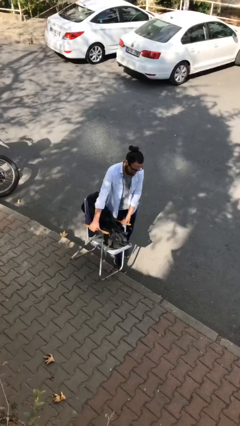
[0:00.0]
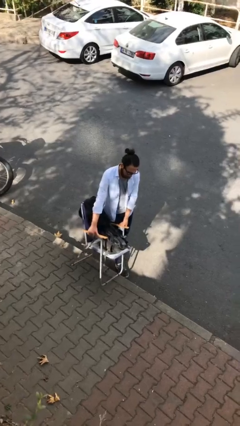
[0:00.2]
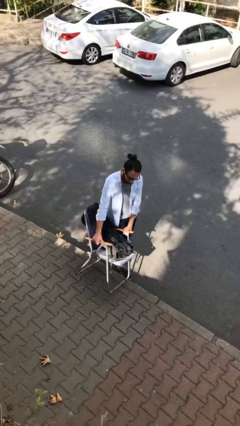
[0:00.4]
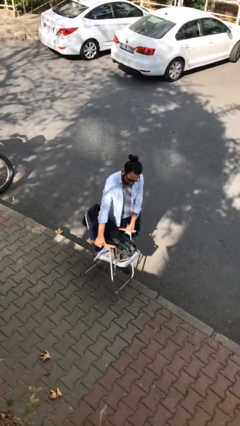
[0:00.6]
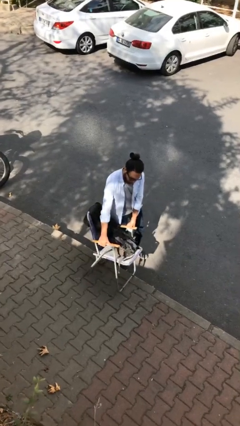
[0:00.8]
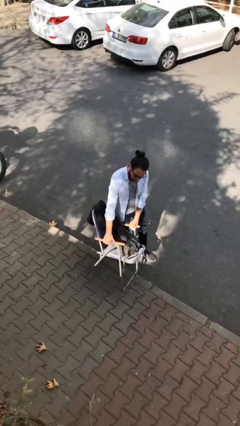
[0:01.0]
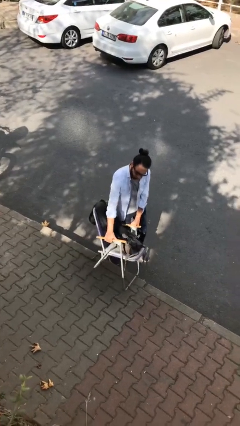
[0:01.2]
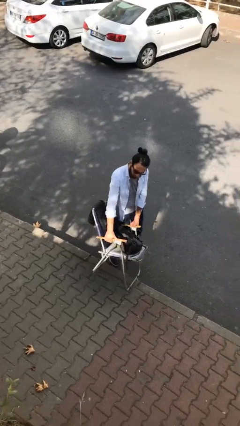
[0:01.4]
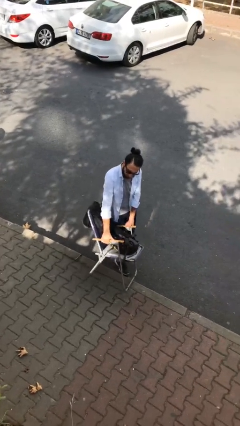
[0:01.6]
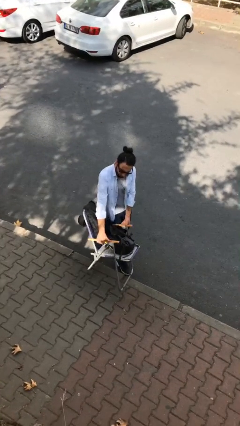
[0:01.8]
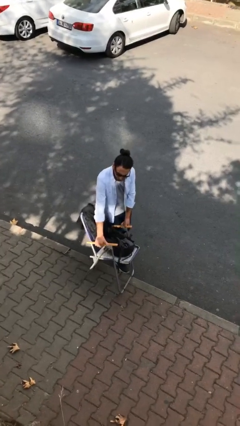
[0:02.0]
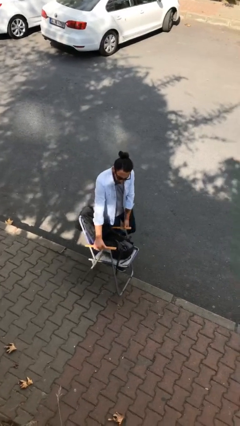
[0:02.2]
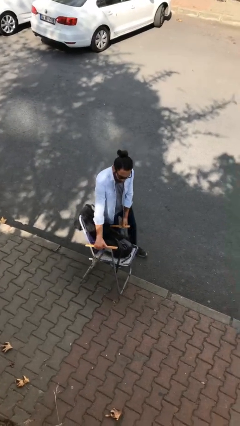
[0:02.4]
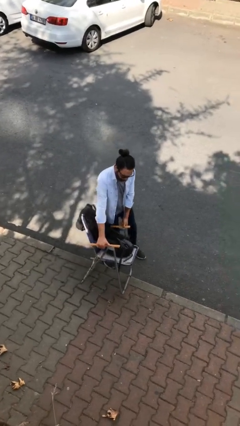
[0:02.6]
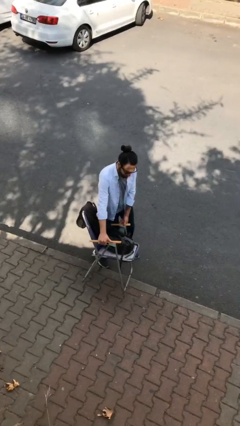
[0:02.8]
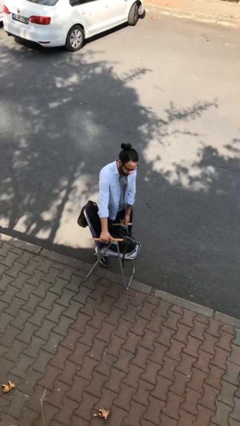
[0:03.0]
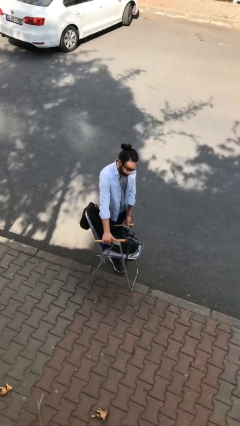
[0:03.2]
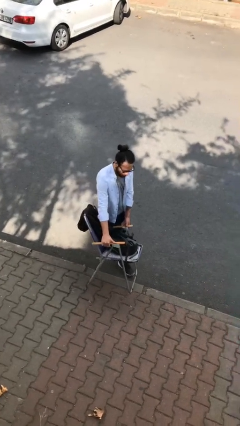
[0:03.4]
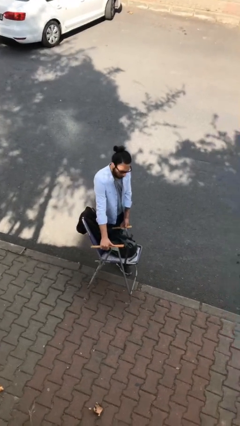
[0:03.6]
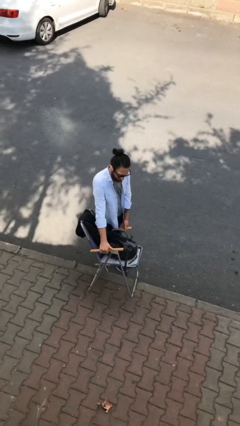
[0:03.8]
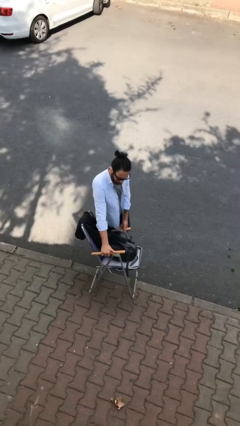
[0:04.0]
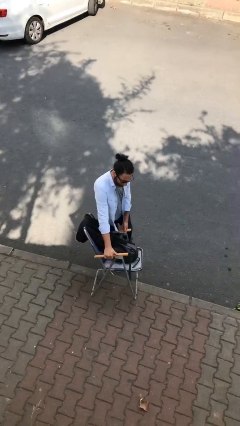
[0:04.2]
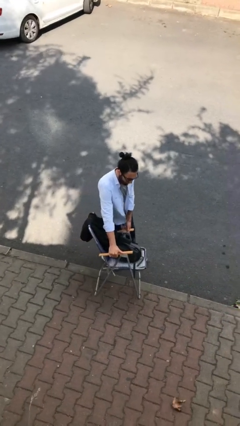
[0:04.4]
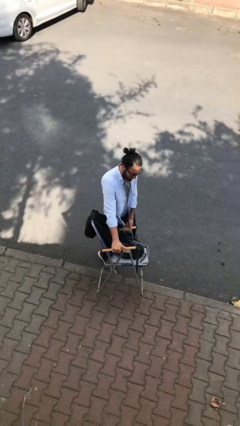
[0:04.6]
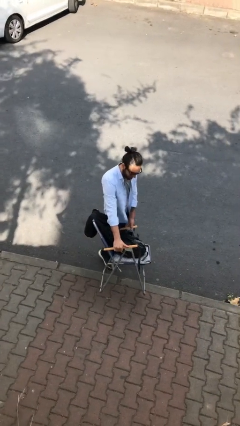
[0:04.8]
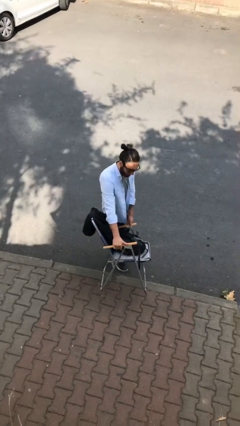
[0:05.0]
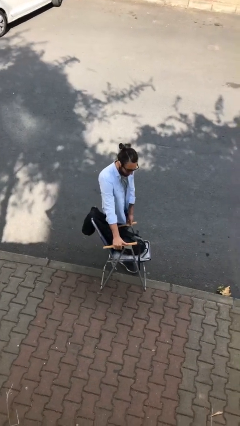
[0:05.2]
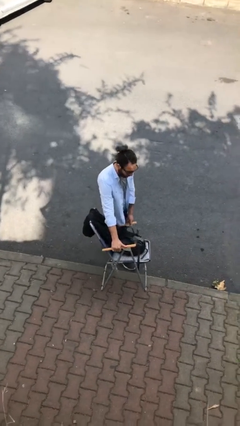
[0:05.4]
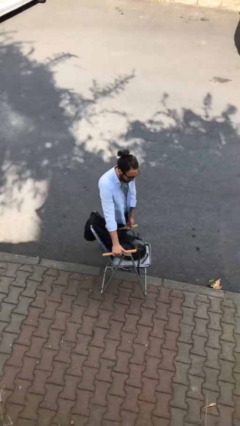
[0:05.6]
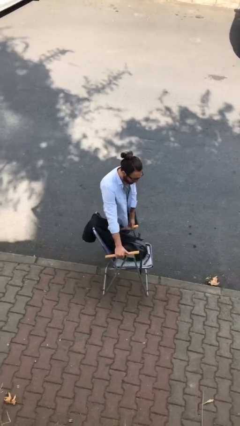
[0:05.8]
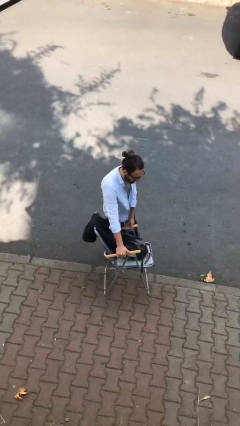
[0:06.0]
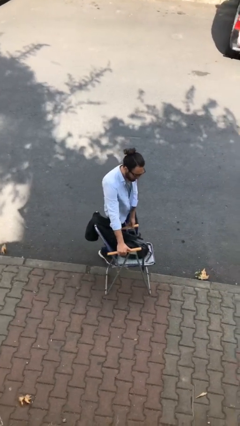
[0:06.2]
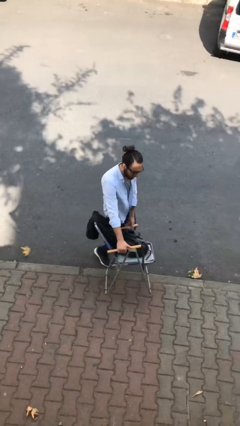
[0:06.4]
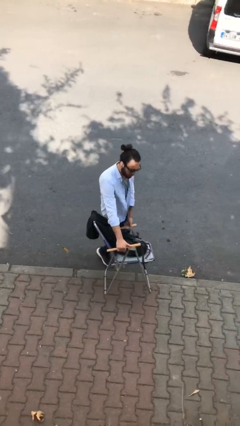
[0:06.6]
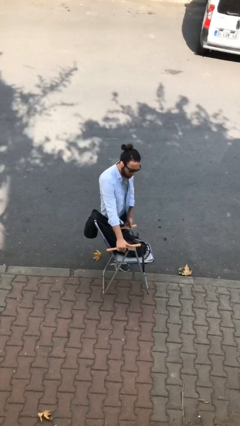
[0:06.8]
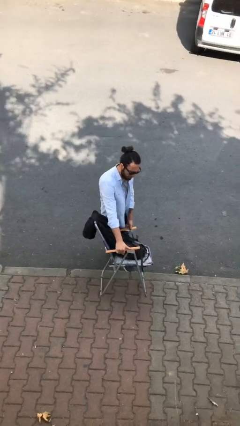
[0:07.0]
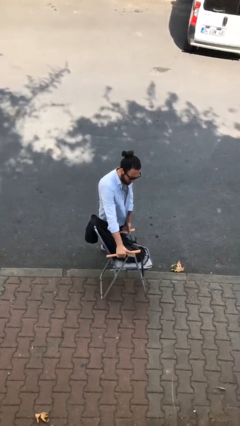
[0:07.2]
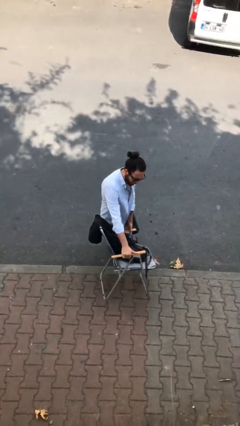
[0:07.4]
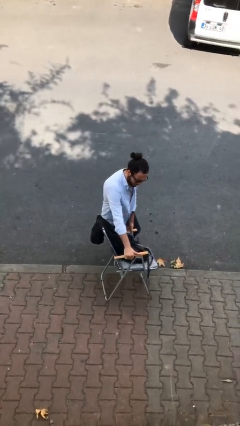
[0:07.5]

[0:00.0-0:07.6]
person carries heavy object

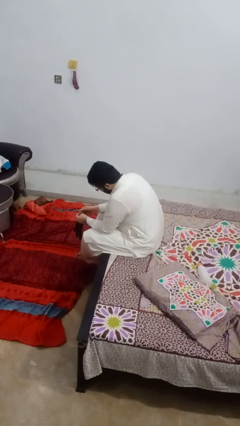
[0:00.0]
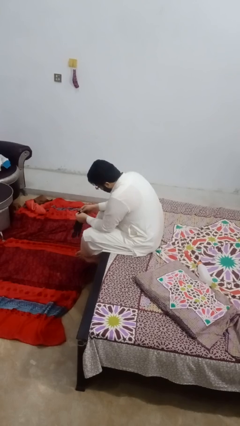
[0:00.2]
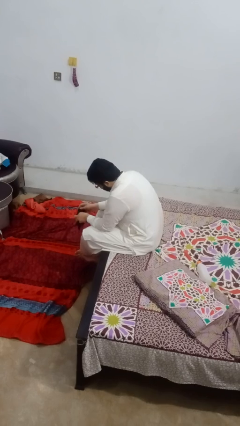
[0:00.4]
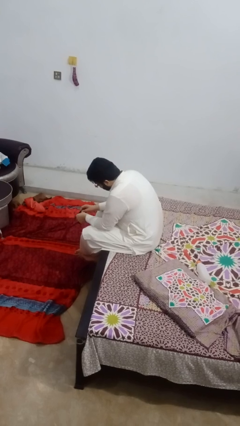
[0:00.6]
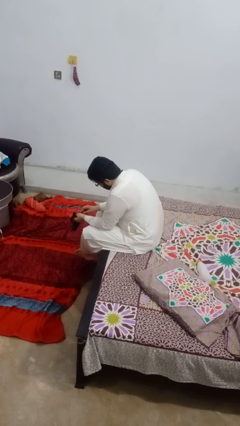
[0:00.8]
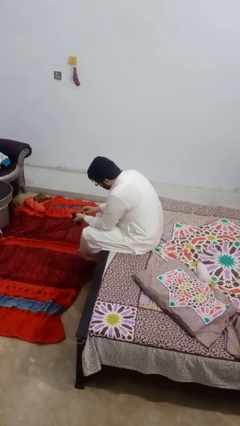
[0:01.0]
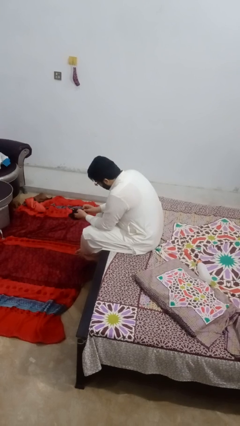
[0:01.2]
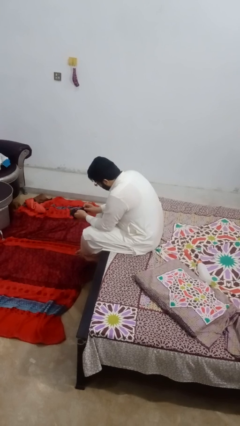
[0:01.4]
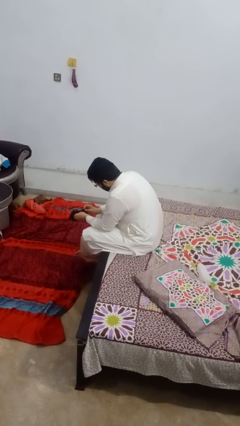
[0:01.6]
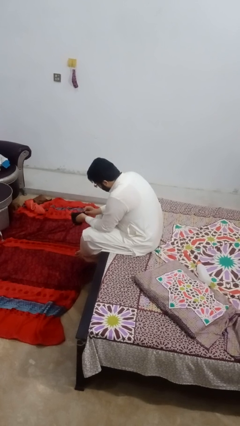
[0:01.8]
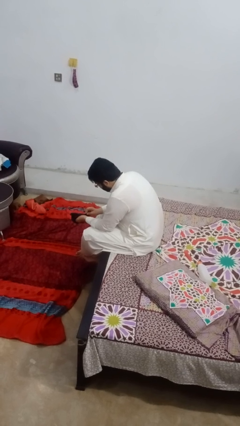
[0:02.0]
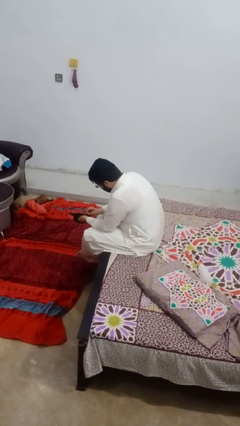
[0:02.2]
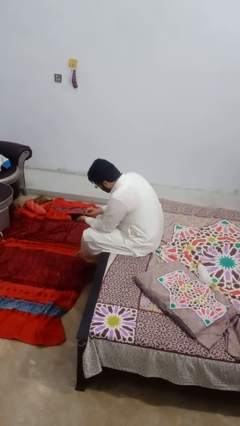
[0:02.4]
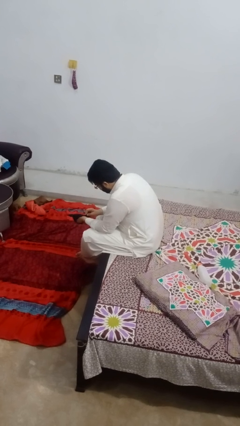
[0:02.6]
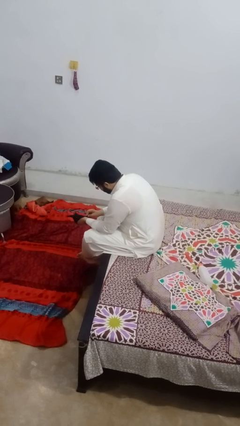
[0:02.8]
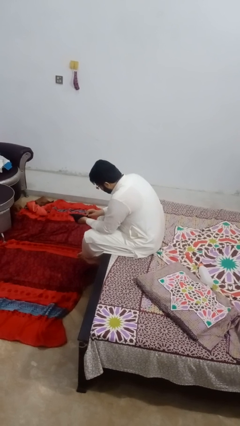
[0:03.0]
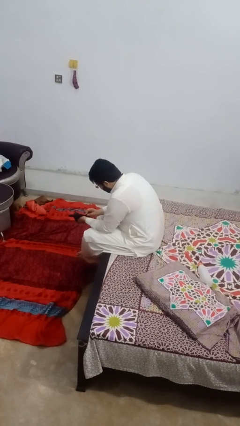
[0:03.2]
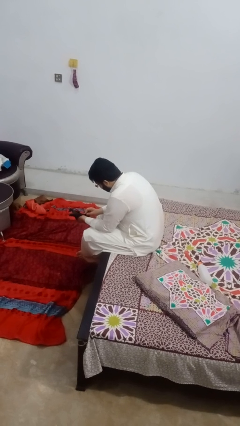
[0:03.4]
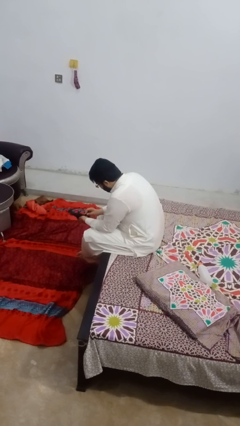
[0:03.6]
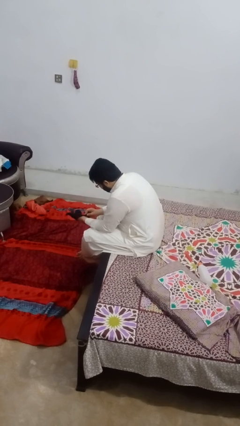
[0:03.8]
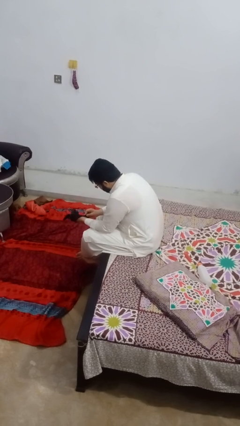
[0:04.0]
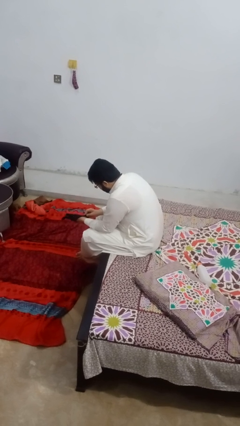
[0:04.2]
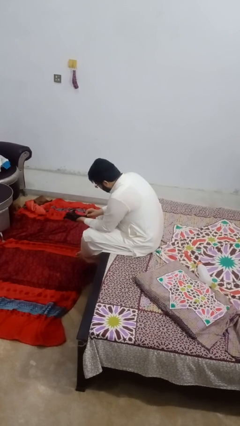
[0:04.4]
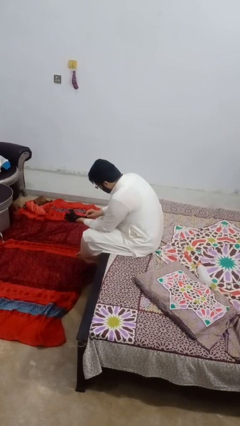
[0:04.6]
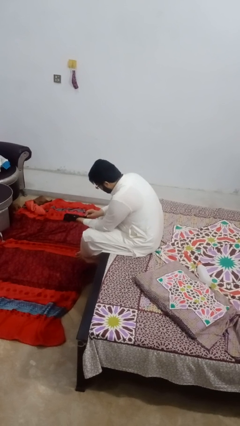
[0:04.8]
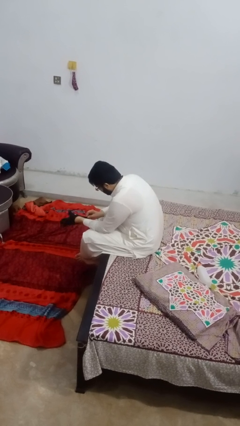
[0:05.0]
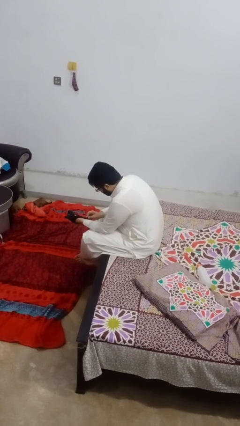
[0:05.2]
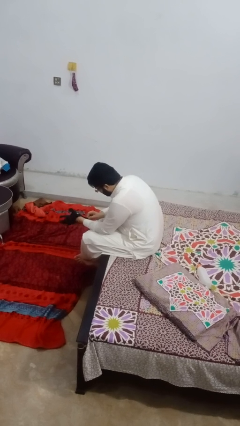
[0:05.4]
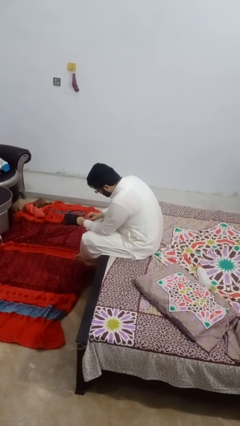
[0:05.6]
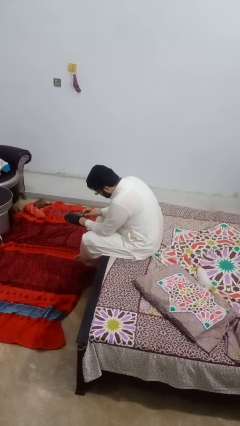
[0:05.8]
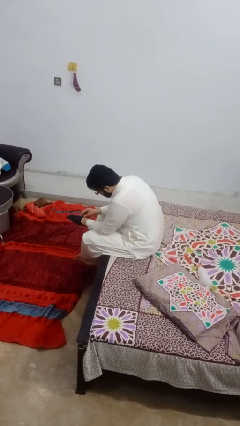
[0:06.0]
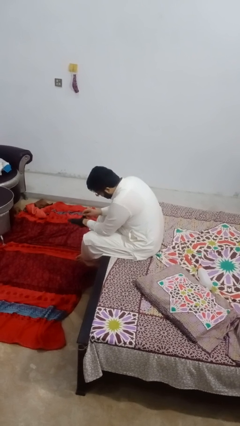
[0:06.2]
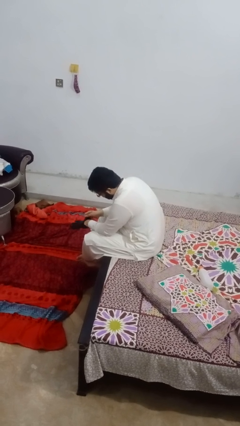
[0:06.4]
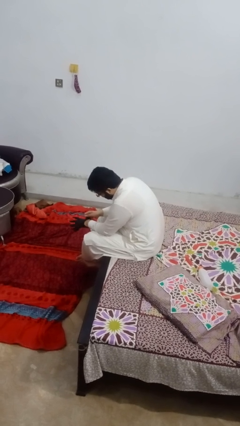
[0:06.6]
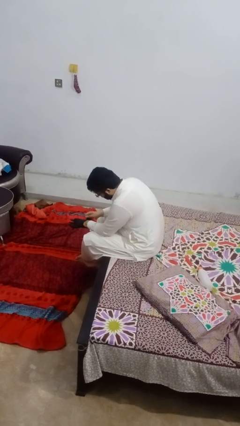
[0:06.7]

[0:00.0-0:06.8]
person puts on gloves

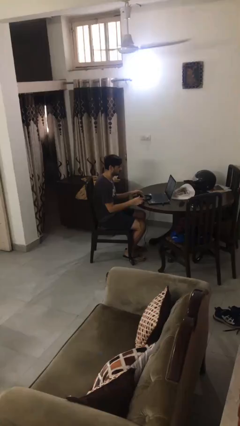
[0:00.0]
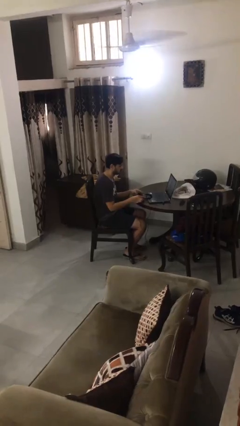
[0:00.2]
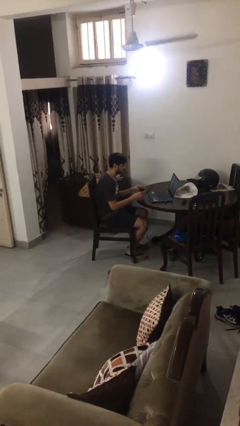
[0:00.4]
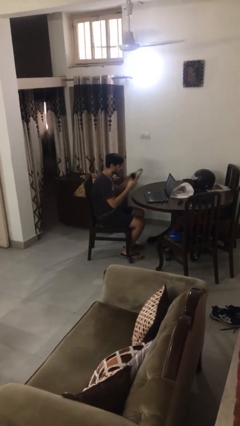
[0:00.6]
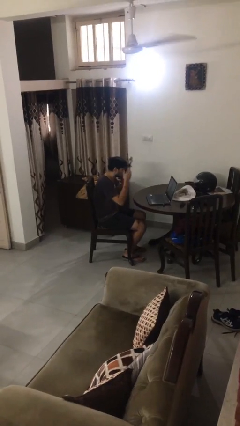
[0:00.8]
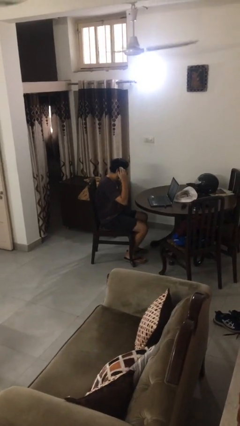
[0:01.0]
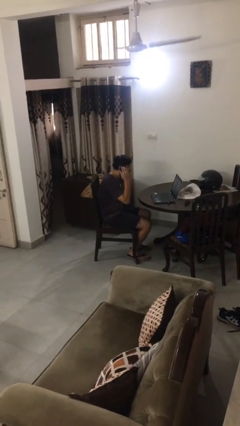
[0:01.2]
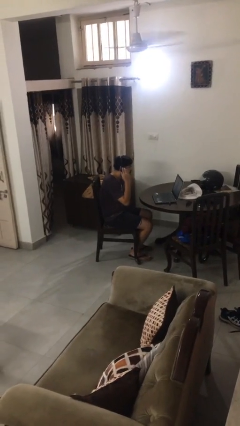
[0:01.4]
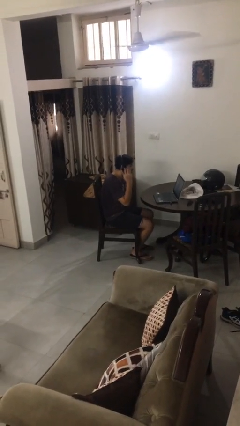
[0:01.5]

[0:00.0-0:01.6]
person puts on headphones

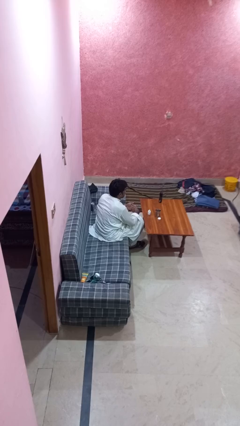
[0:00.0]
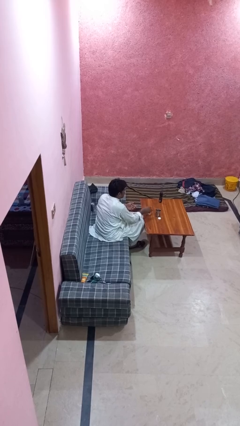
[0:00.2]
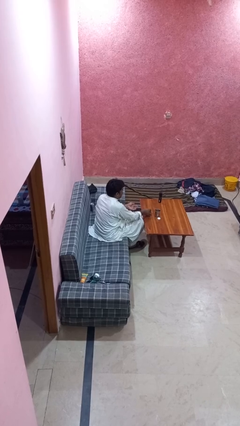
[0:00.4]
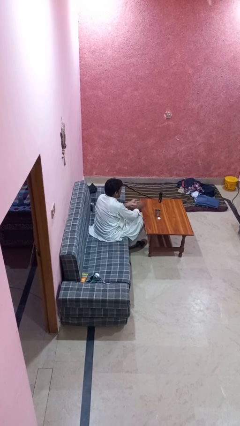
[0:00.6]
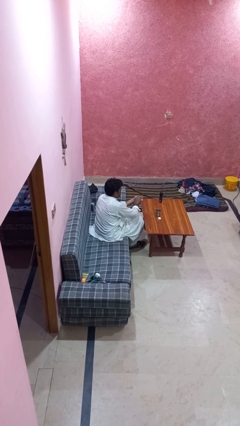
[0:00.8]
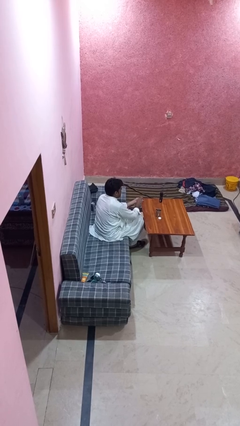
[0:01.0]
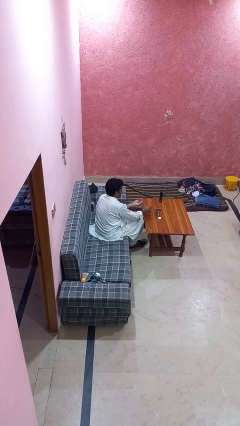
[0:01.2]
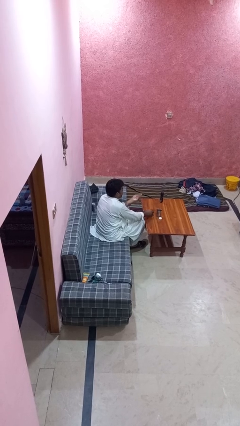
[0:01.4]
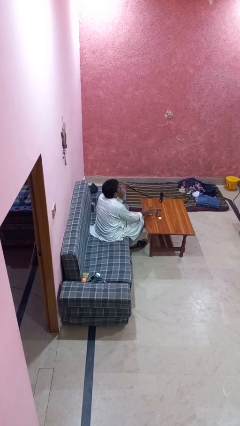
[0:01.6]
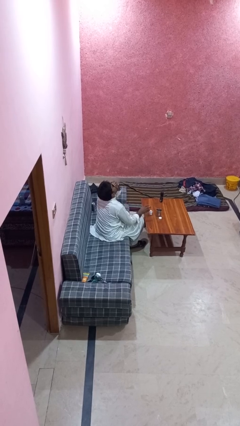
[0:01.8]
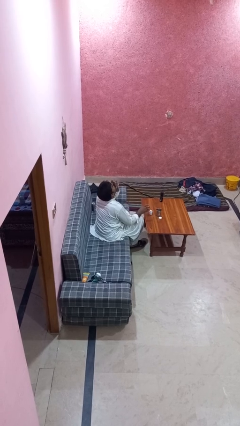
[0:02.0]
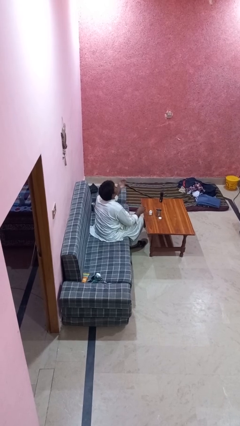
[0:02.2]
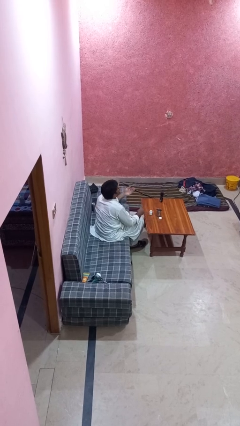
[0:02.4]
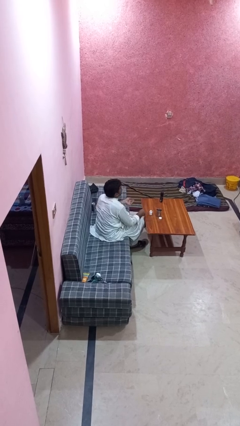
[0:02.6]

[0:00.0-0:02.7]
person takes medicine pills
